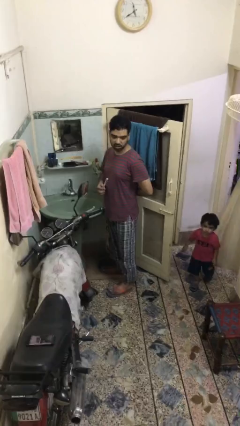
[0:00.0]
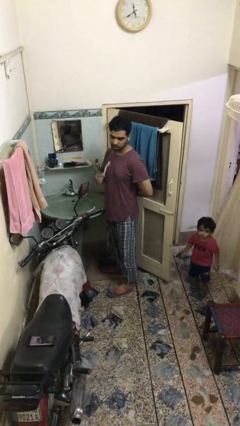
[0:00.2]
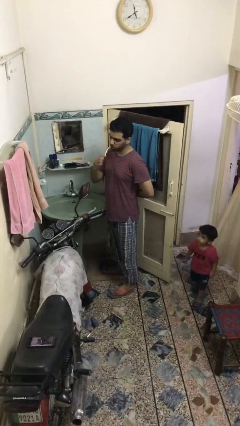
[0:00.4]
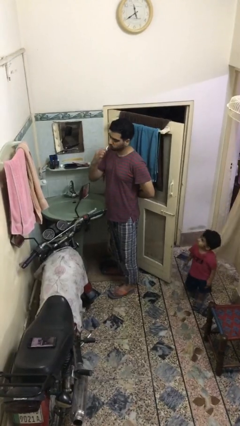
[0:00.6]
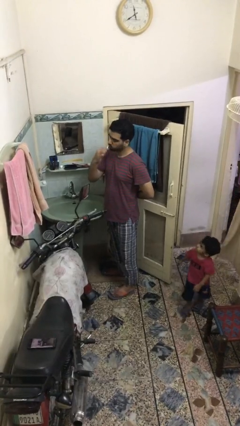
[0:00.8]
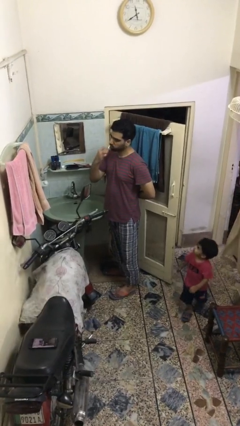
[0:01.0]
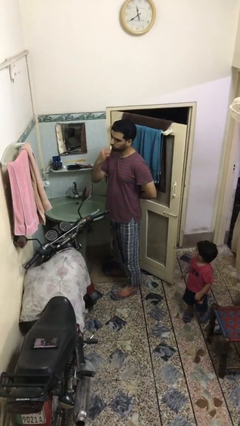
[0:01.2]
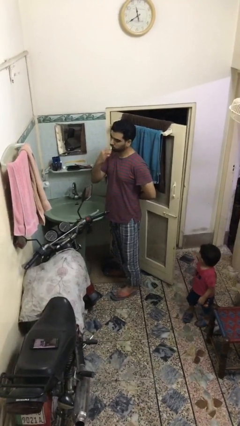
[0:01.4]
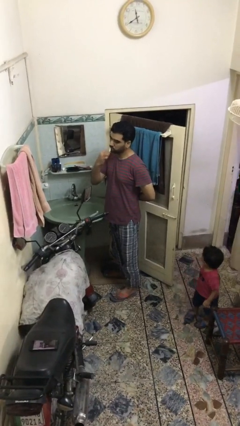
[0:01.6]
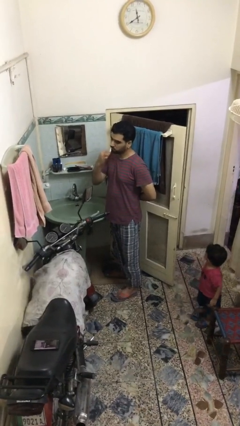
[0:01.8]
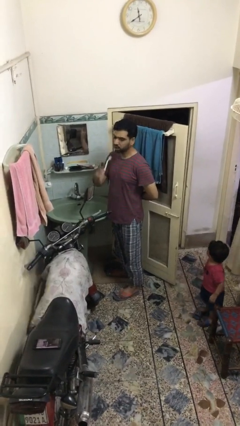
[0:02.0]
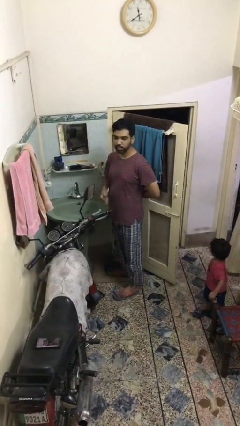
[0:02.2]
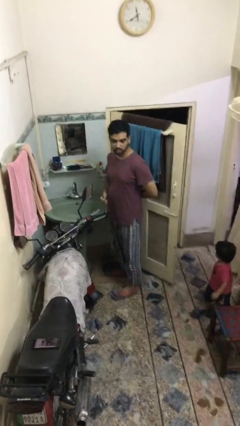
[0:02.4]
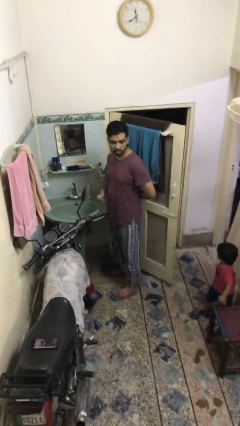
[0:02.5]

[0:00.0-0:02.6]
person brushes teeth

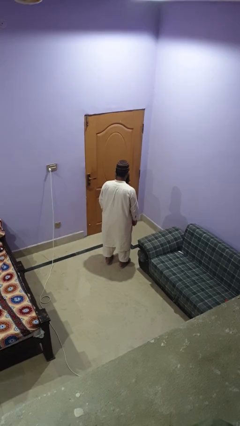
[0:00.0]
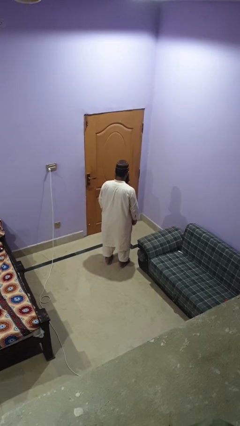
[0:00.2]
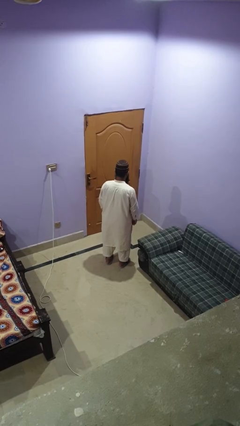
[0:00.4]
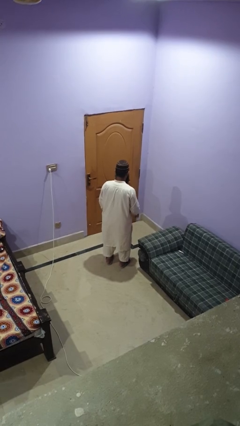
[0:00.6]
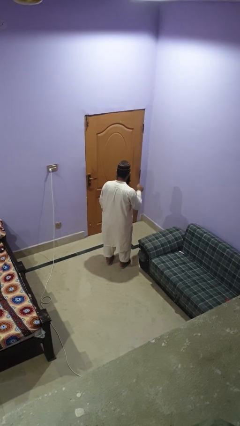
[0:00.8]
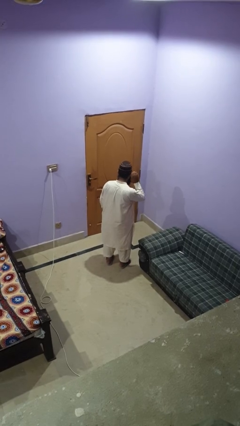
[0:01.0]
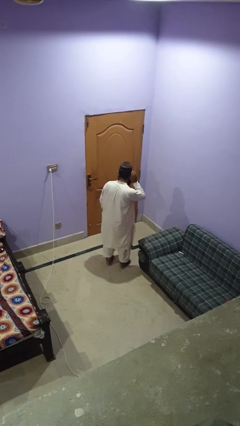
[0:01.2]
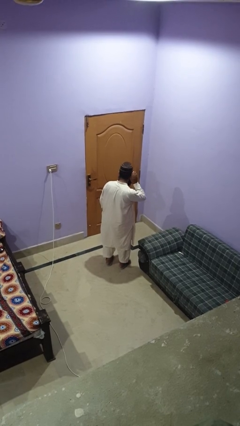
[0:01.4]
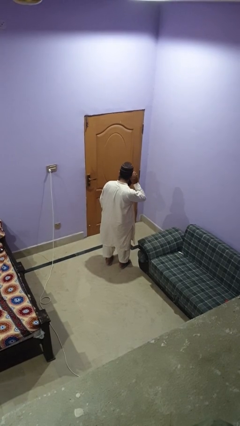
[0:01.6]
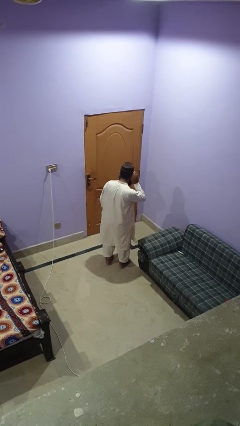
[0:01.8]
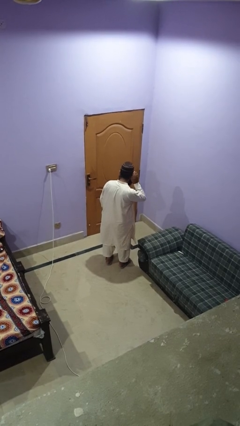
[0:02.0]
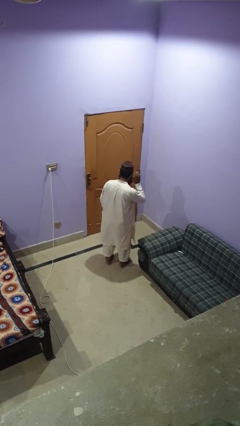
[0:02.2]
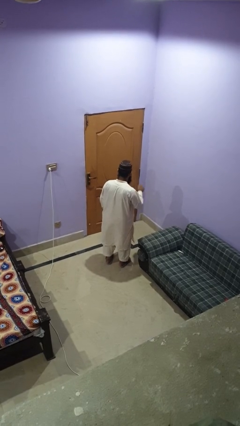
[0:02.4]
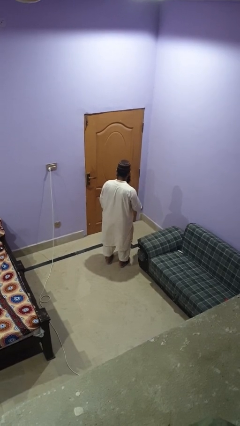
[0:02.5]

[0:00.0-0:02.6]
person gestures listen closely

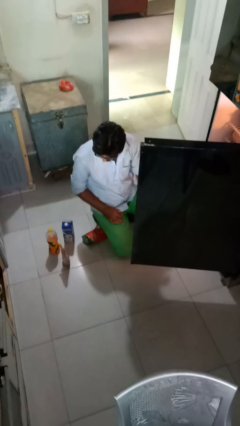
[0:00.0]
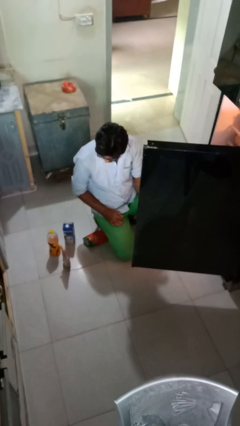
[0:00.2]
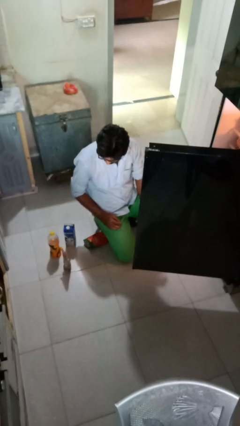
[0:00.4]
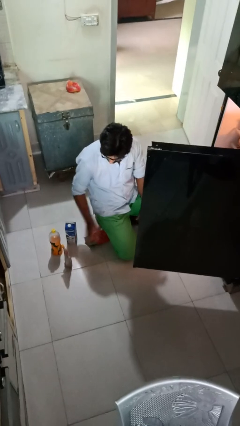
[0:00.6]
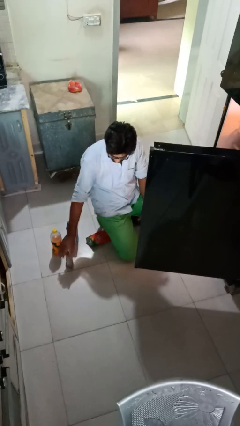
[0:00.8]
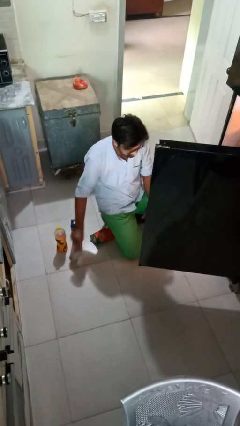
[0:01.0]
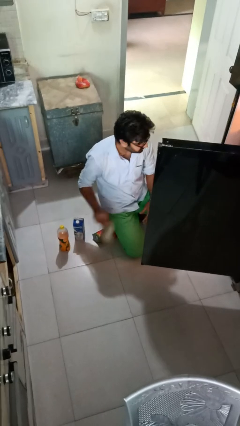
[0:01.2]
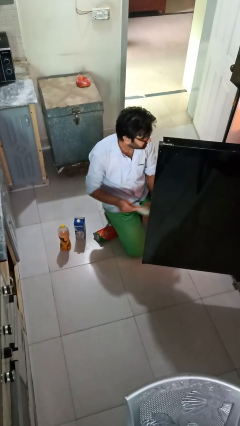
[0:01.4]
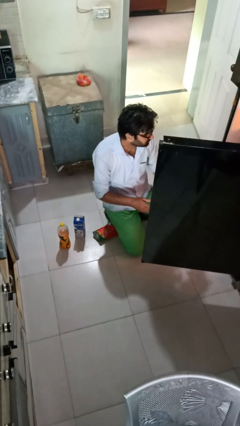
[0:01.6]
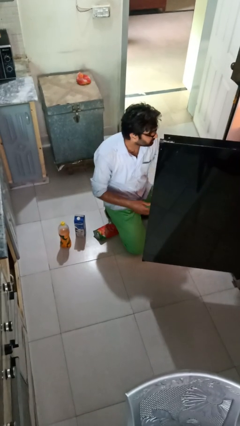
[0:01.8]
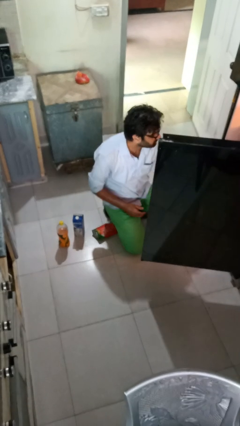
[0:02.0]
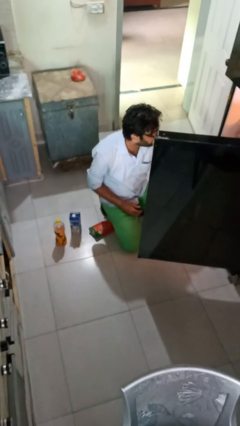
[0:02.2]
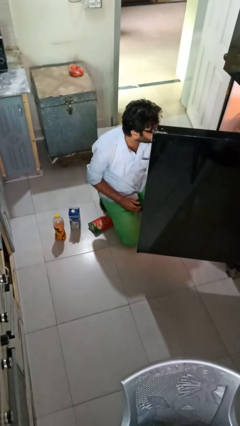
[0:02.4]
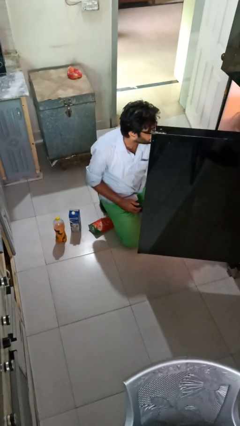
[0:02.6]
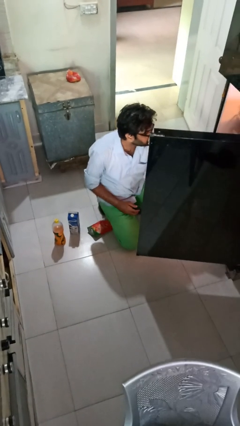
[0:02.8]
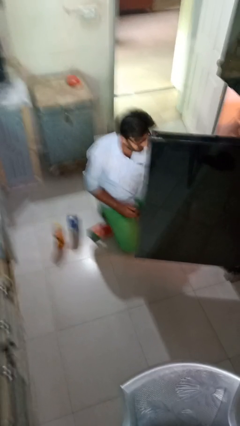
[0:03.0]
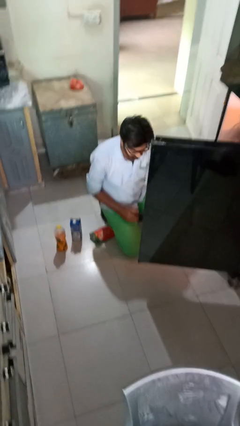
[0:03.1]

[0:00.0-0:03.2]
person loads groceries into refrigerator

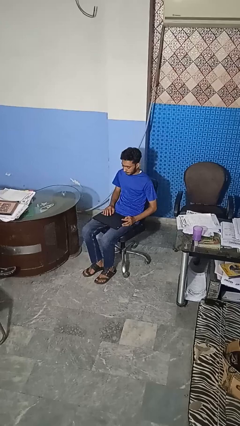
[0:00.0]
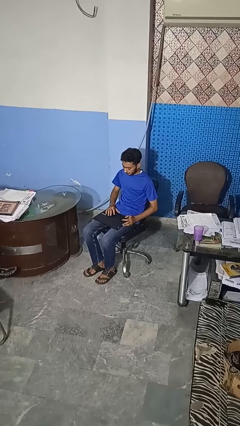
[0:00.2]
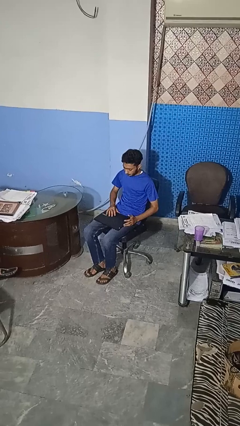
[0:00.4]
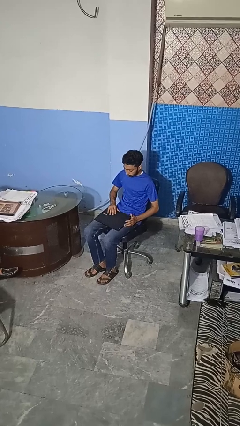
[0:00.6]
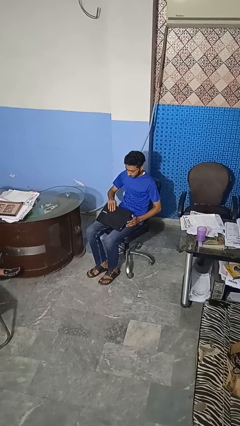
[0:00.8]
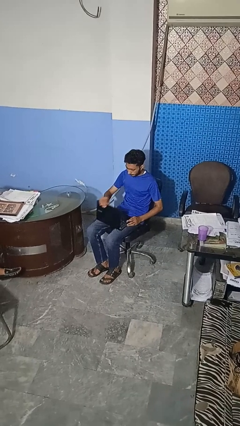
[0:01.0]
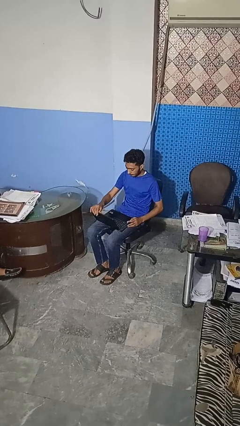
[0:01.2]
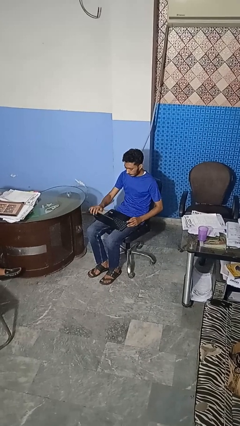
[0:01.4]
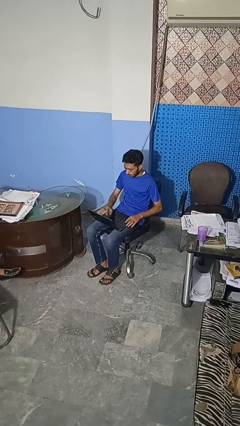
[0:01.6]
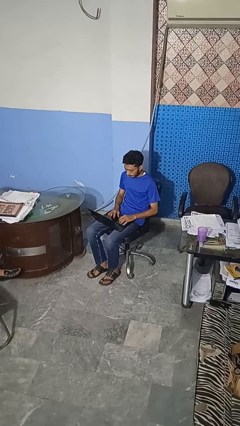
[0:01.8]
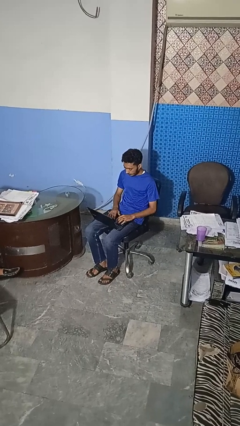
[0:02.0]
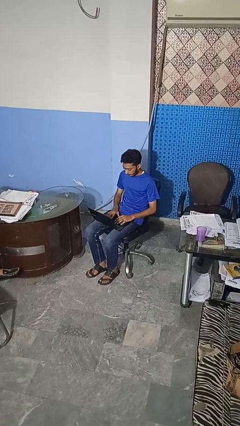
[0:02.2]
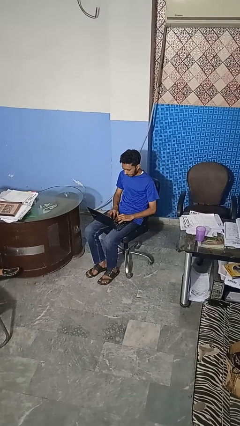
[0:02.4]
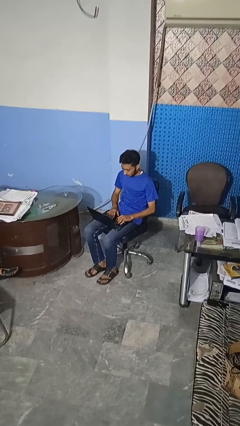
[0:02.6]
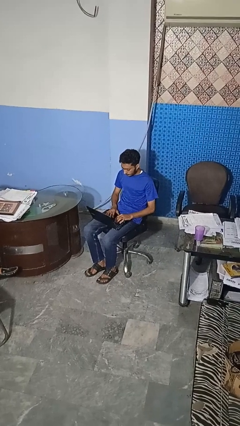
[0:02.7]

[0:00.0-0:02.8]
person opens laptop

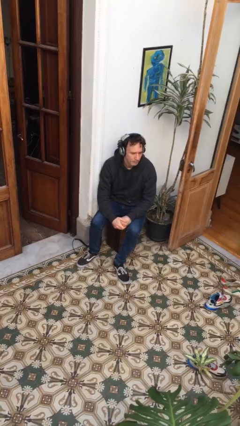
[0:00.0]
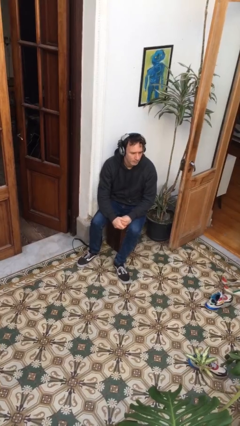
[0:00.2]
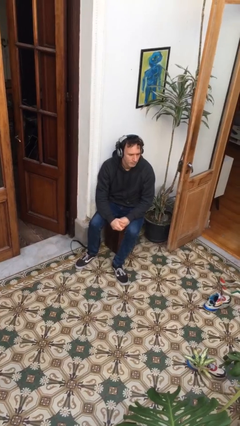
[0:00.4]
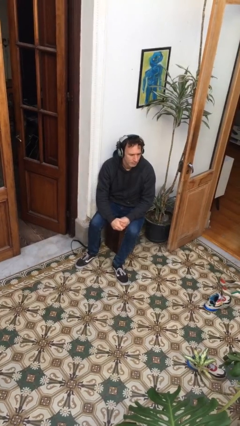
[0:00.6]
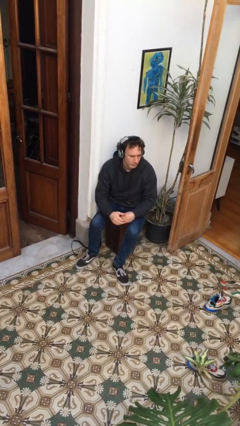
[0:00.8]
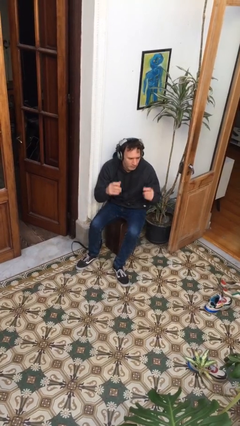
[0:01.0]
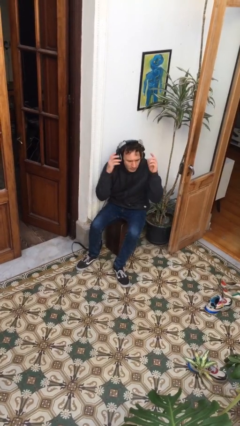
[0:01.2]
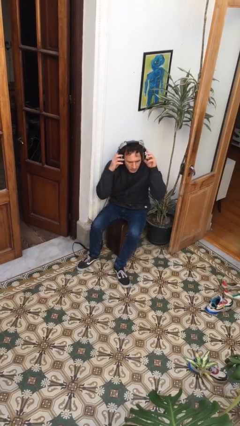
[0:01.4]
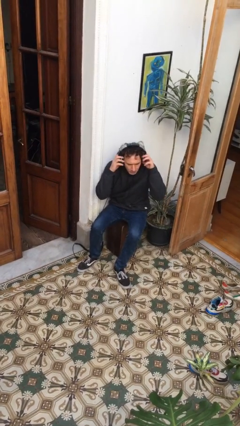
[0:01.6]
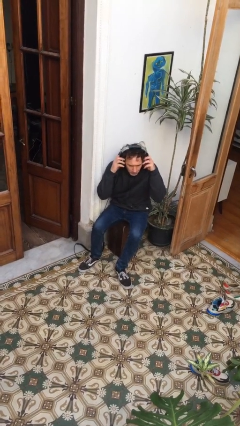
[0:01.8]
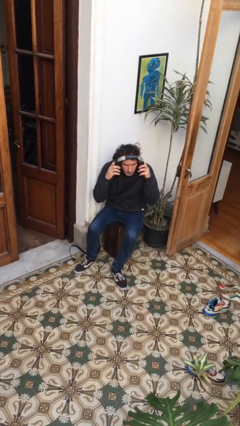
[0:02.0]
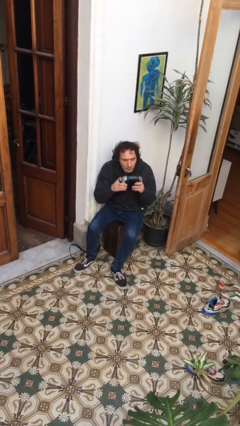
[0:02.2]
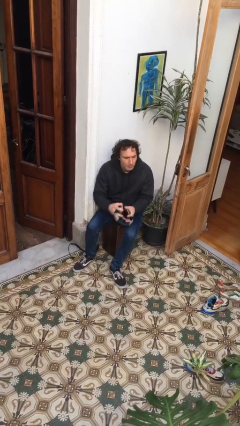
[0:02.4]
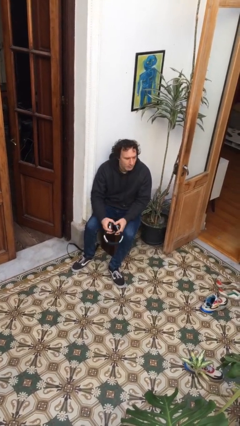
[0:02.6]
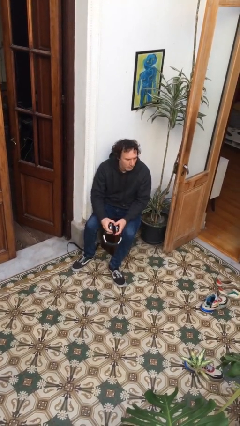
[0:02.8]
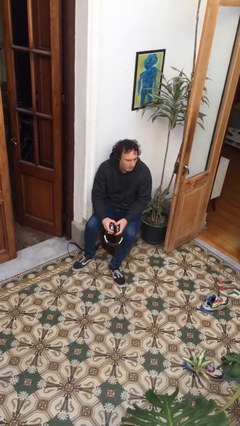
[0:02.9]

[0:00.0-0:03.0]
person takes off headphones

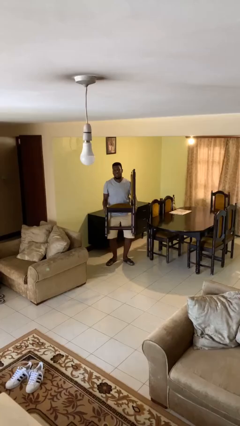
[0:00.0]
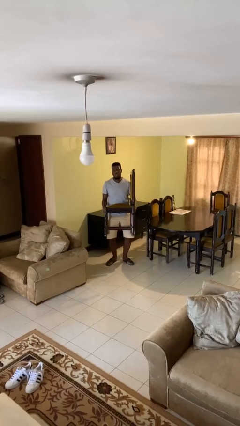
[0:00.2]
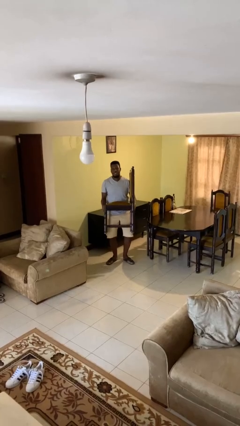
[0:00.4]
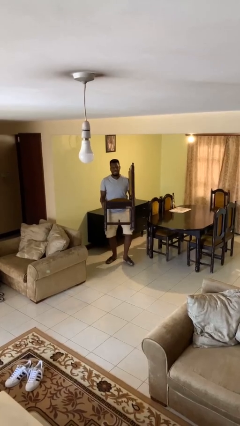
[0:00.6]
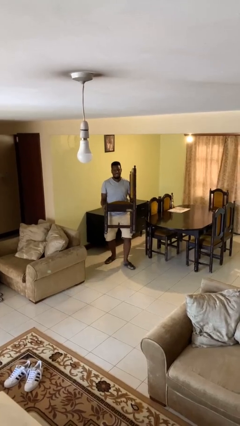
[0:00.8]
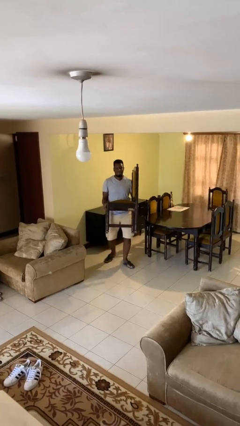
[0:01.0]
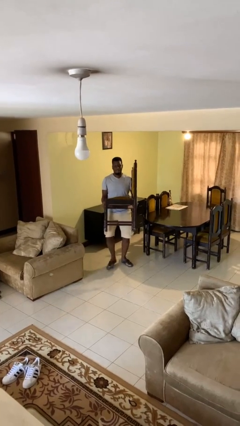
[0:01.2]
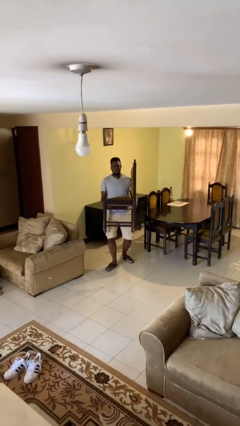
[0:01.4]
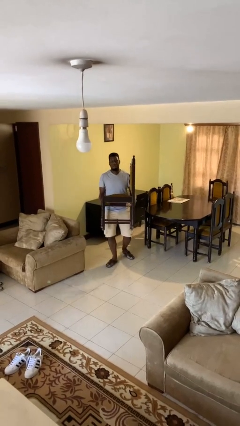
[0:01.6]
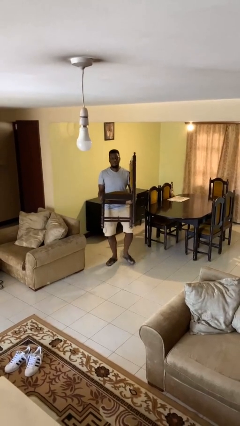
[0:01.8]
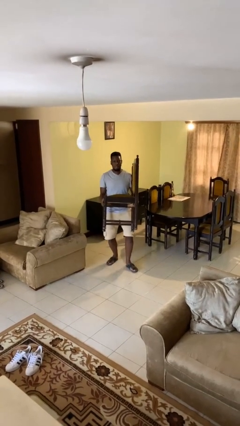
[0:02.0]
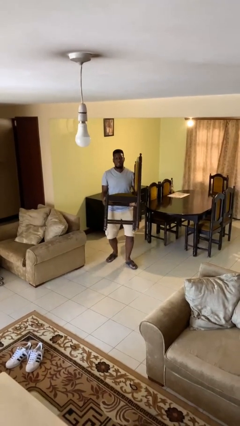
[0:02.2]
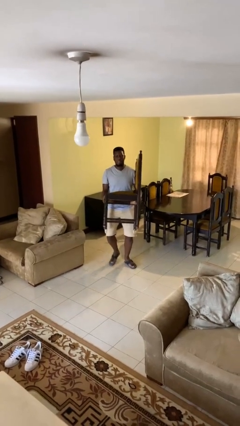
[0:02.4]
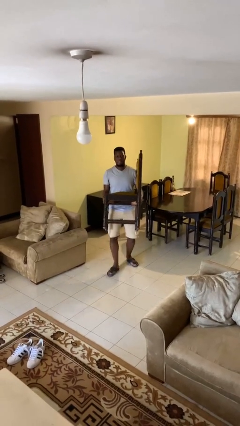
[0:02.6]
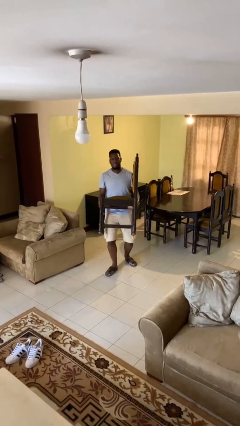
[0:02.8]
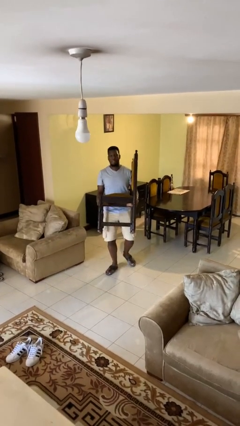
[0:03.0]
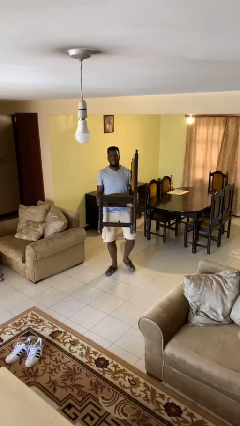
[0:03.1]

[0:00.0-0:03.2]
person carries heavy object
